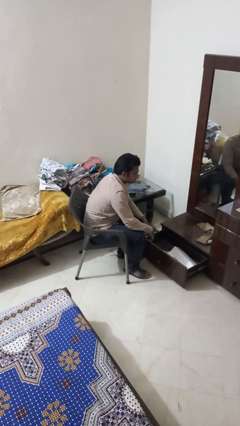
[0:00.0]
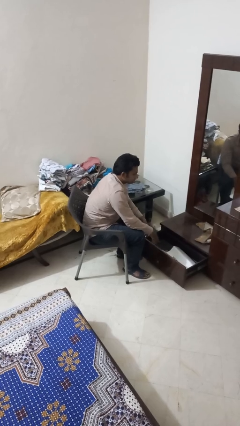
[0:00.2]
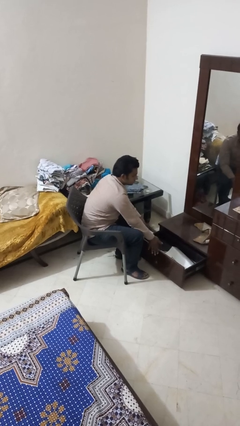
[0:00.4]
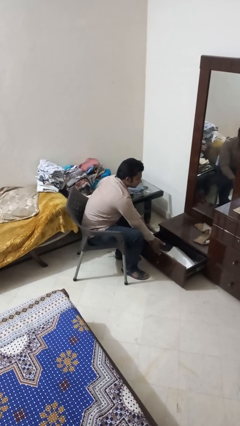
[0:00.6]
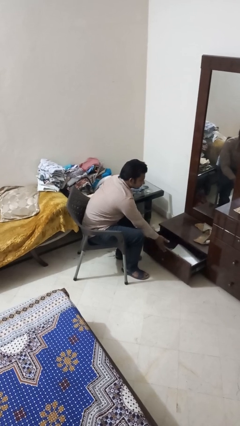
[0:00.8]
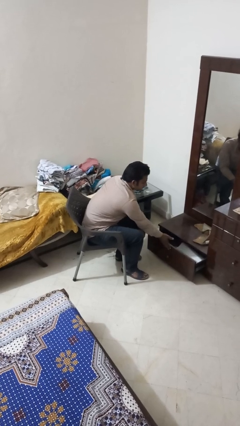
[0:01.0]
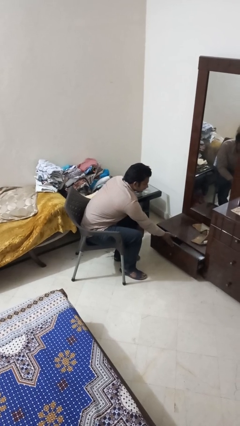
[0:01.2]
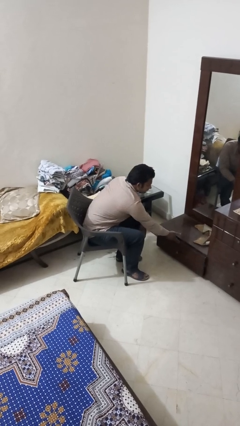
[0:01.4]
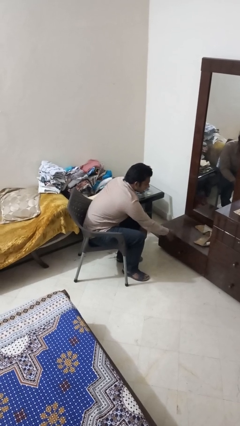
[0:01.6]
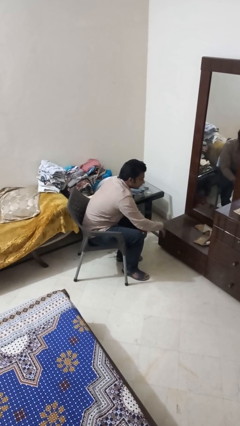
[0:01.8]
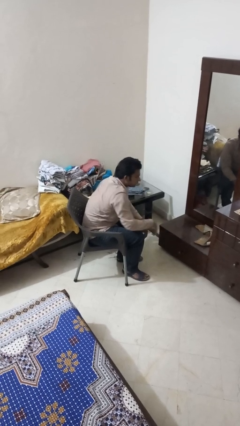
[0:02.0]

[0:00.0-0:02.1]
person closes dresser drawer

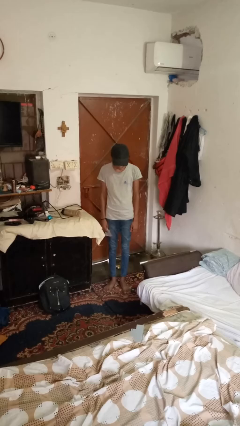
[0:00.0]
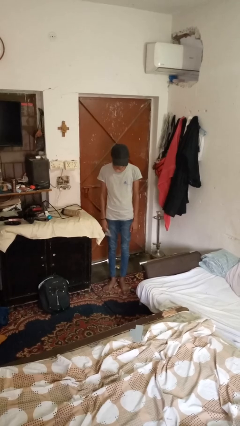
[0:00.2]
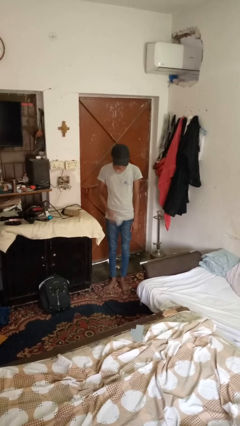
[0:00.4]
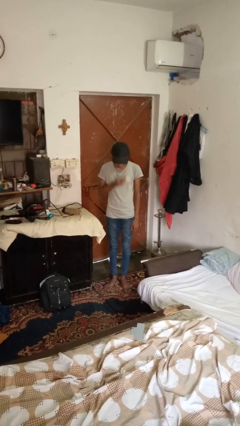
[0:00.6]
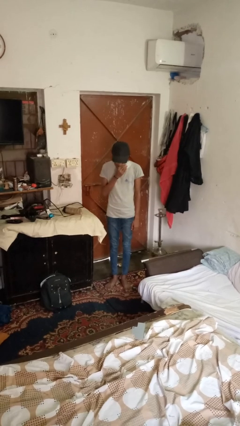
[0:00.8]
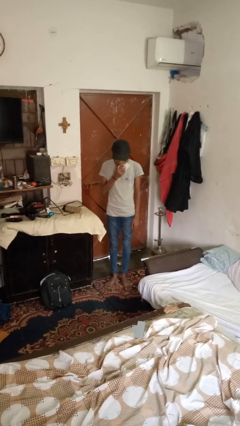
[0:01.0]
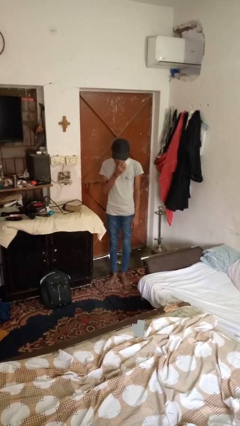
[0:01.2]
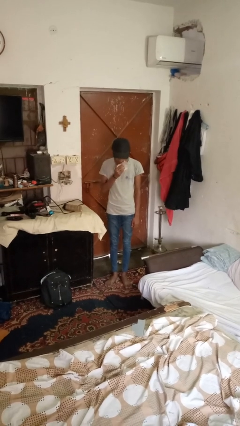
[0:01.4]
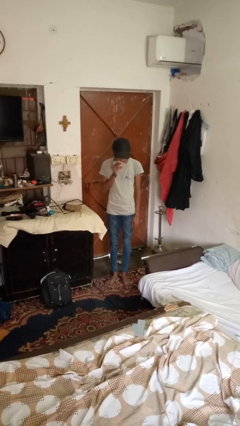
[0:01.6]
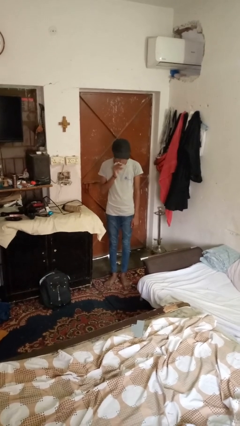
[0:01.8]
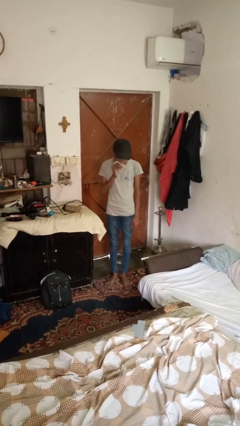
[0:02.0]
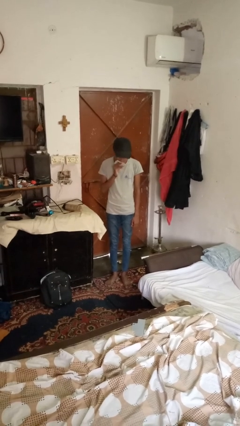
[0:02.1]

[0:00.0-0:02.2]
person wipes mouth with napkin

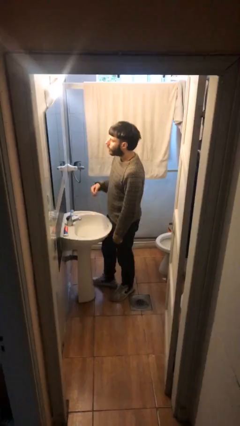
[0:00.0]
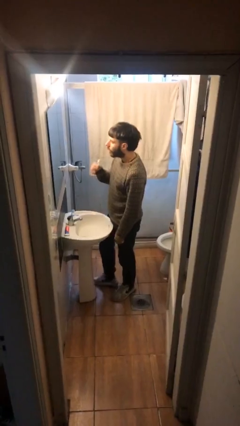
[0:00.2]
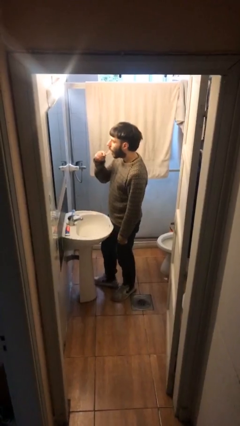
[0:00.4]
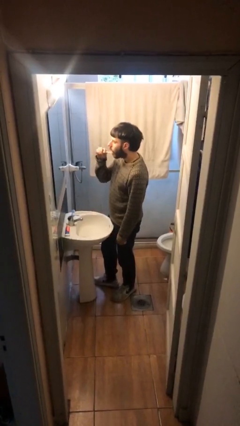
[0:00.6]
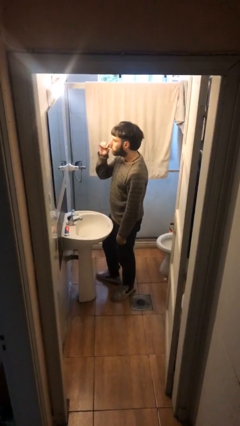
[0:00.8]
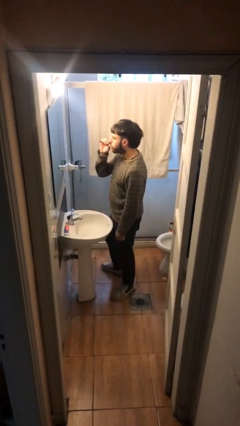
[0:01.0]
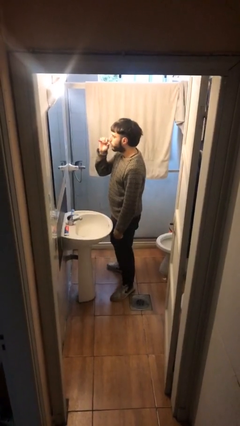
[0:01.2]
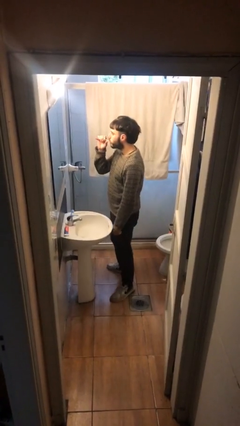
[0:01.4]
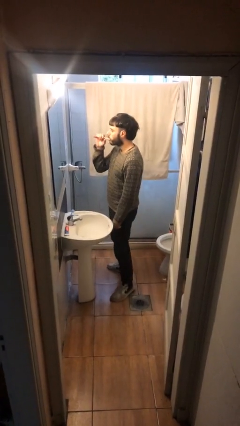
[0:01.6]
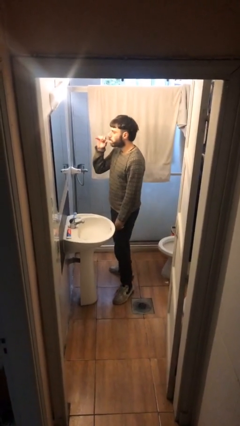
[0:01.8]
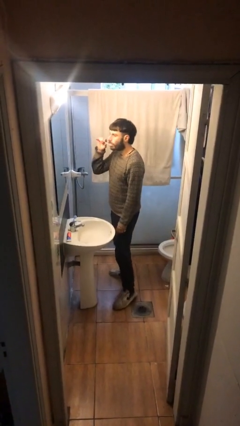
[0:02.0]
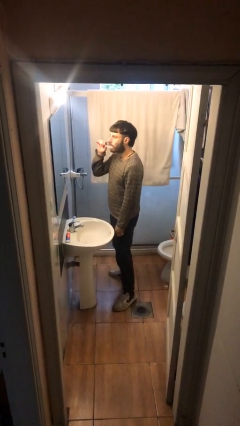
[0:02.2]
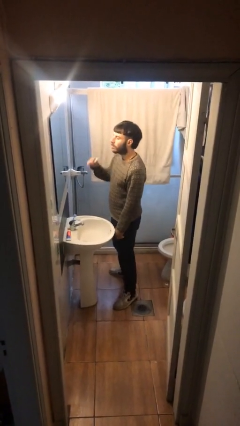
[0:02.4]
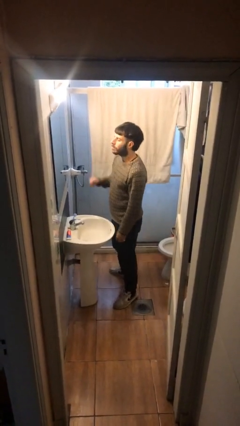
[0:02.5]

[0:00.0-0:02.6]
person brushes teeth

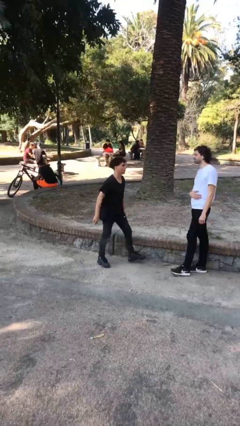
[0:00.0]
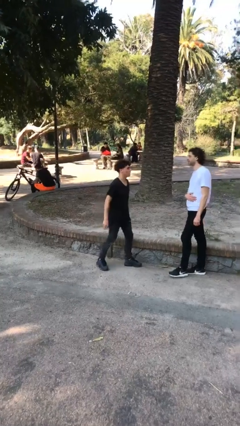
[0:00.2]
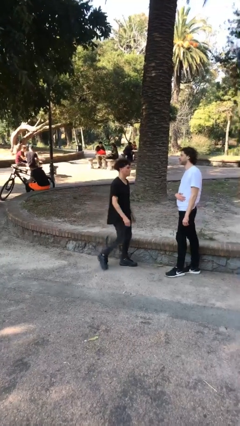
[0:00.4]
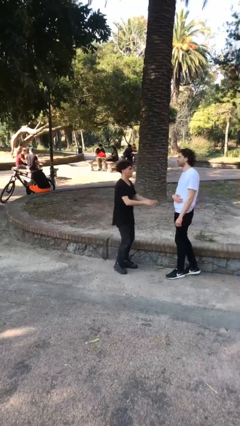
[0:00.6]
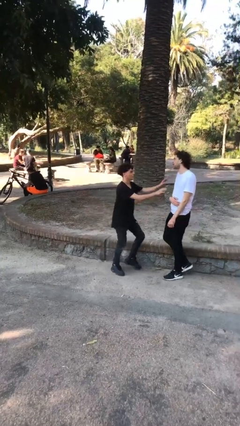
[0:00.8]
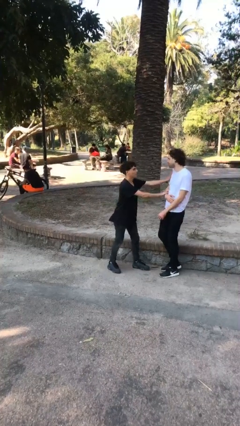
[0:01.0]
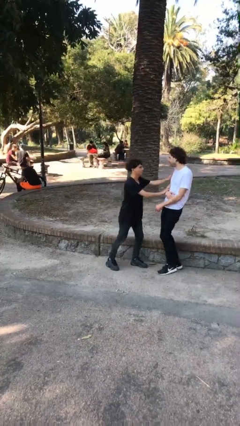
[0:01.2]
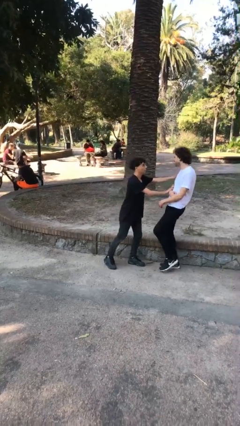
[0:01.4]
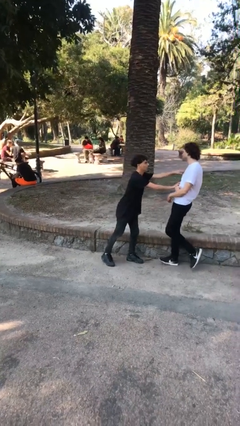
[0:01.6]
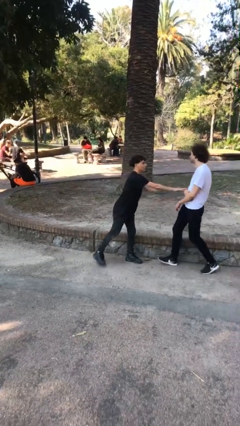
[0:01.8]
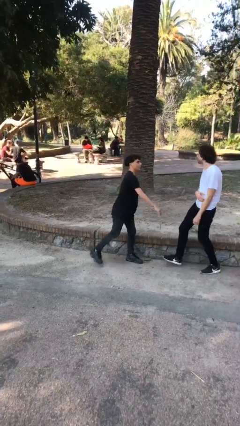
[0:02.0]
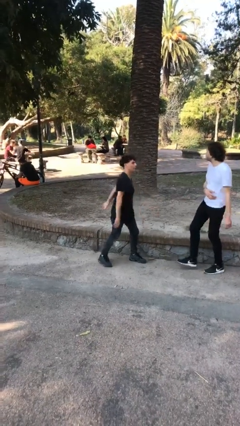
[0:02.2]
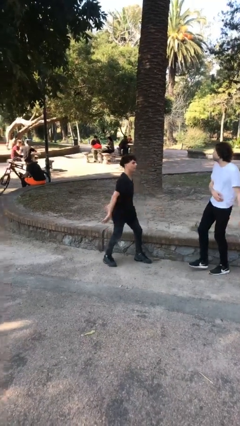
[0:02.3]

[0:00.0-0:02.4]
person shoves person

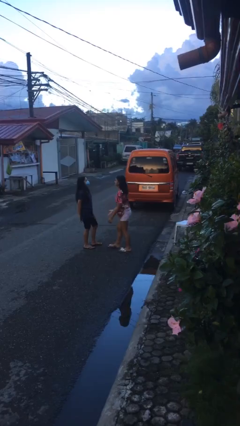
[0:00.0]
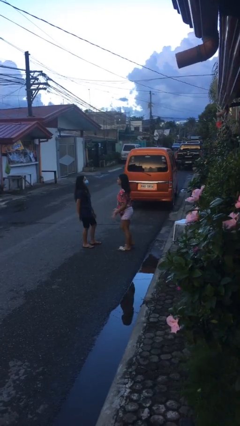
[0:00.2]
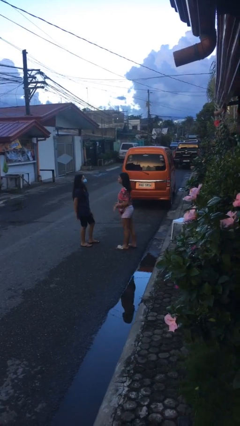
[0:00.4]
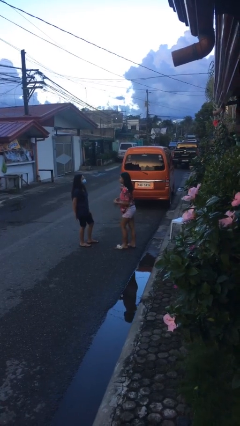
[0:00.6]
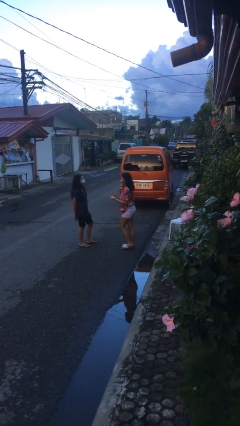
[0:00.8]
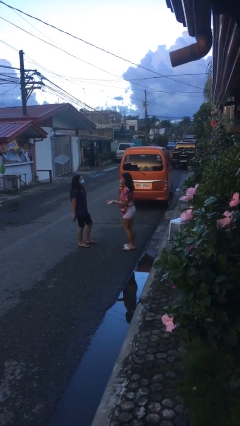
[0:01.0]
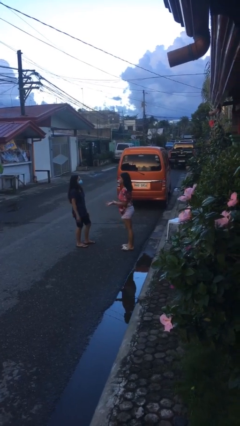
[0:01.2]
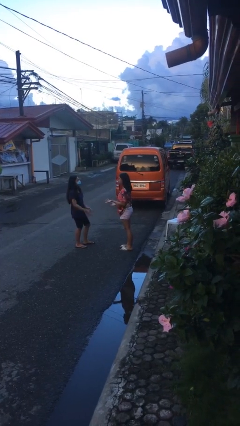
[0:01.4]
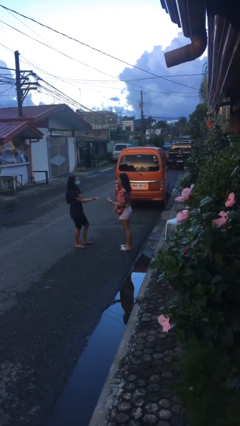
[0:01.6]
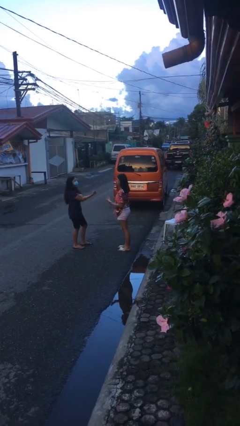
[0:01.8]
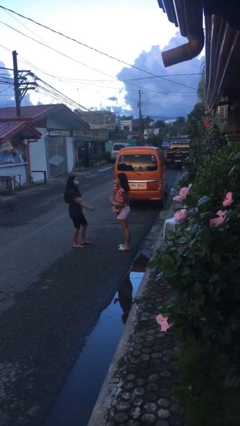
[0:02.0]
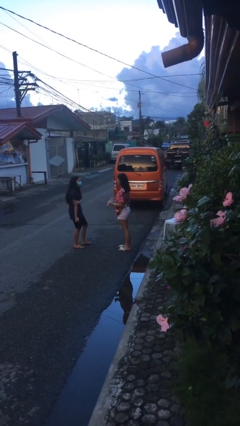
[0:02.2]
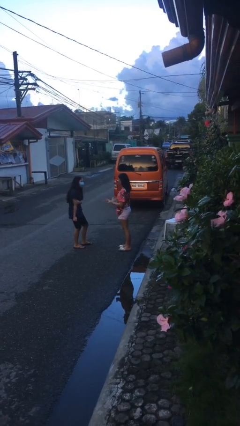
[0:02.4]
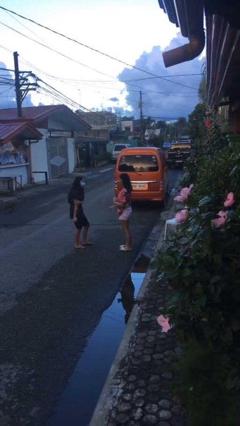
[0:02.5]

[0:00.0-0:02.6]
person talks to person

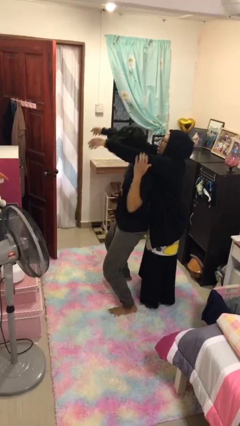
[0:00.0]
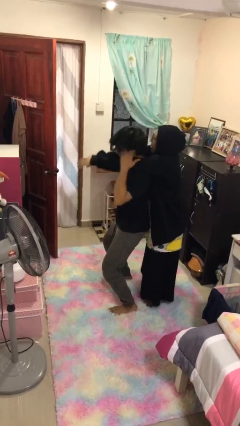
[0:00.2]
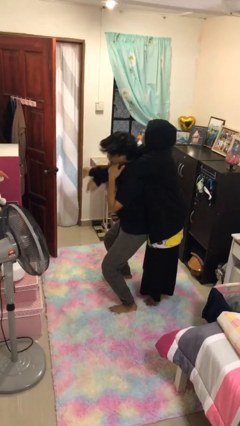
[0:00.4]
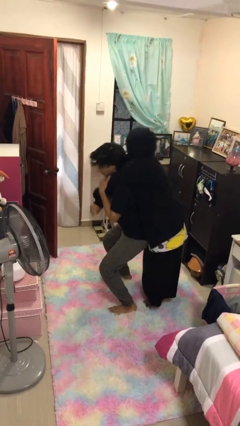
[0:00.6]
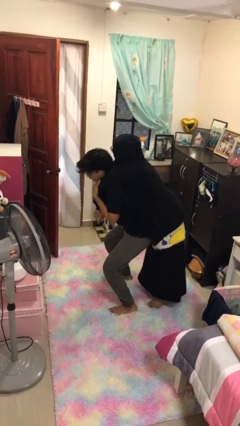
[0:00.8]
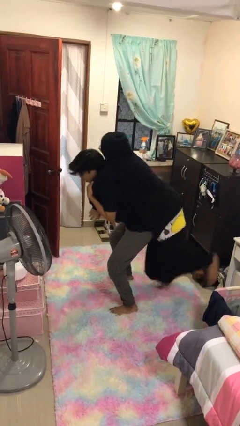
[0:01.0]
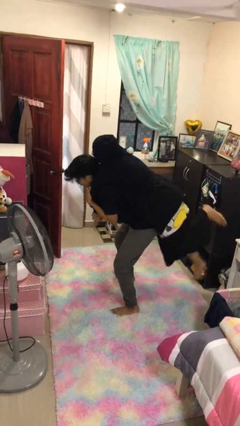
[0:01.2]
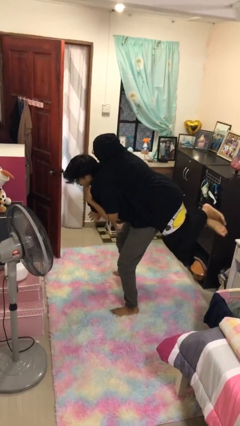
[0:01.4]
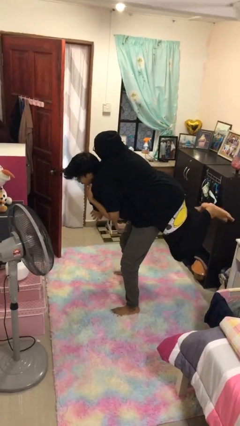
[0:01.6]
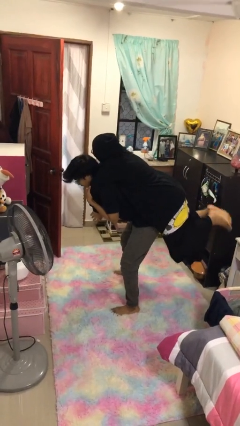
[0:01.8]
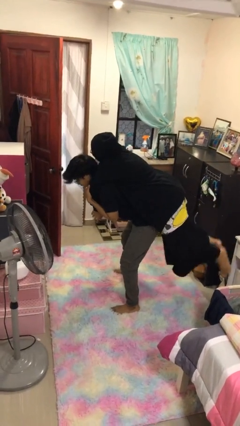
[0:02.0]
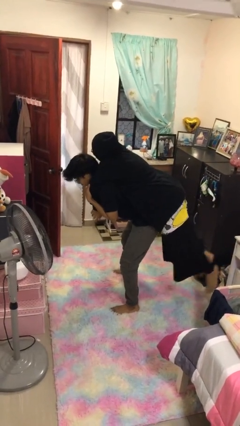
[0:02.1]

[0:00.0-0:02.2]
person picks up person

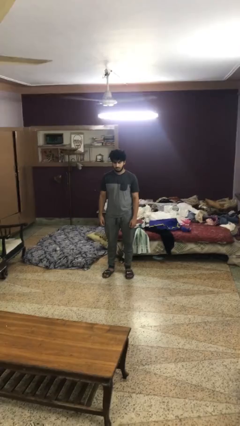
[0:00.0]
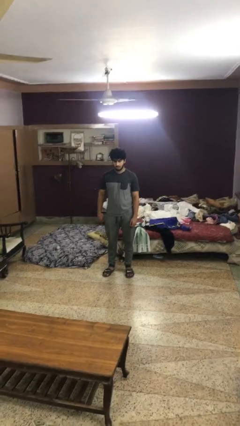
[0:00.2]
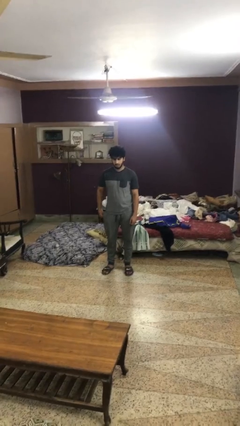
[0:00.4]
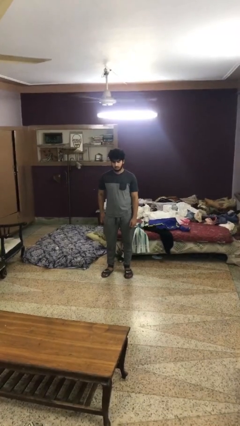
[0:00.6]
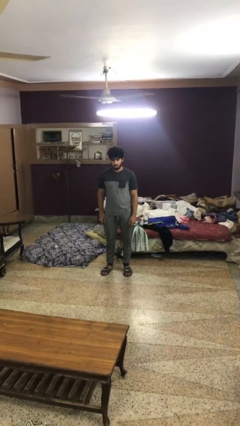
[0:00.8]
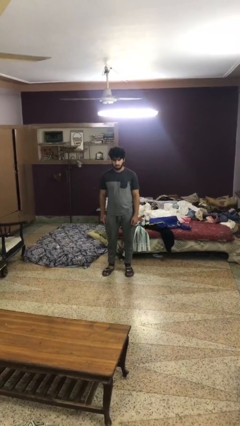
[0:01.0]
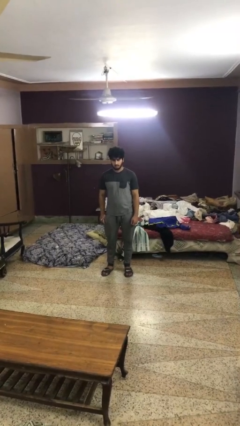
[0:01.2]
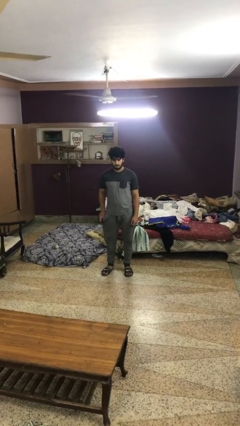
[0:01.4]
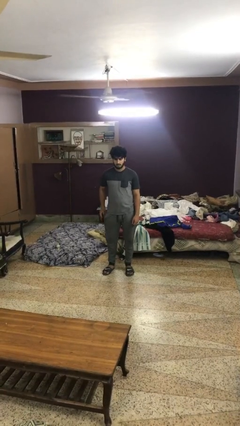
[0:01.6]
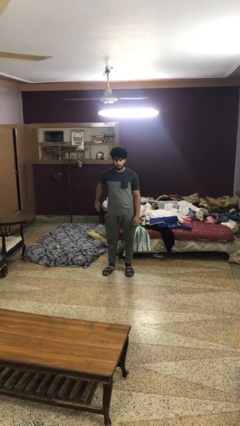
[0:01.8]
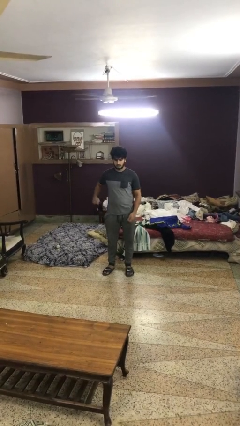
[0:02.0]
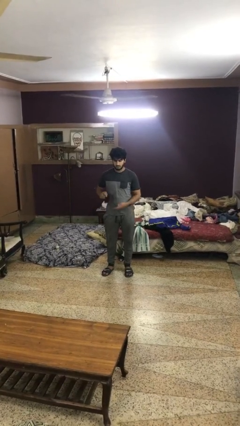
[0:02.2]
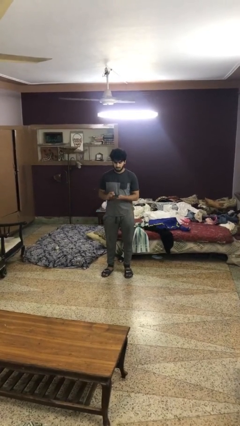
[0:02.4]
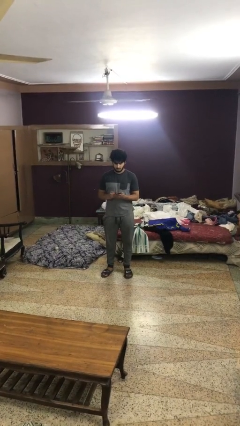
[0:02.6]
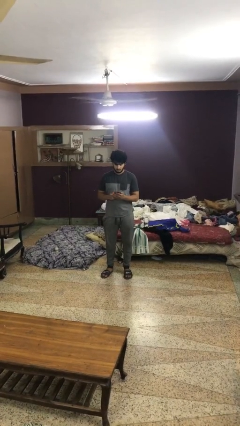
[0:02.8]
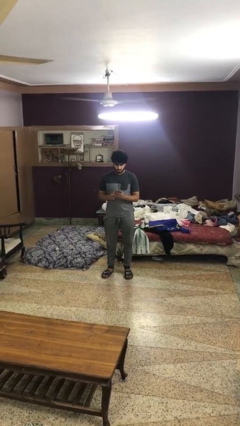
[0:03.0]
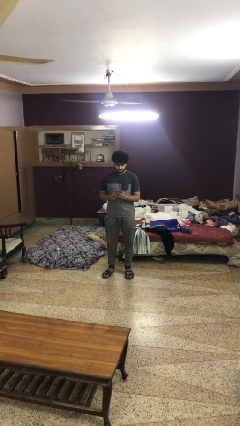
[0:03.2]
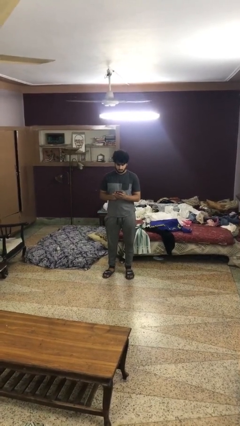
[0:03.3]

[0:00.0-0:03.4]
person takes phone from pocket
